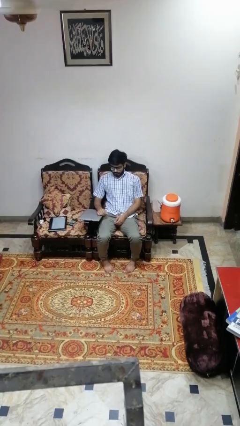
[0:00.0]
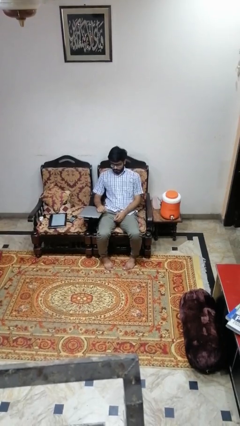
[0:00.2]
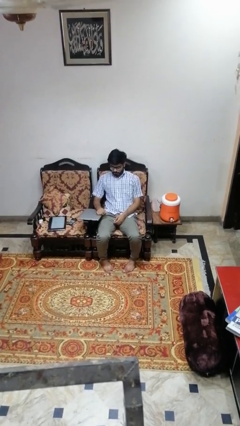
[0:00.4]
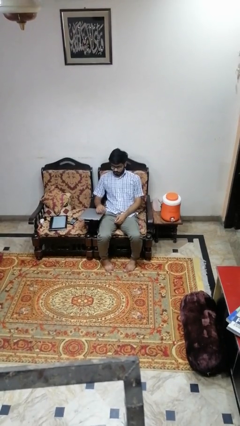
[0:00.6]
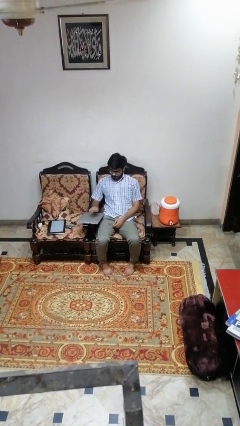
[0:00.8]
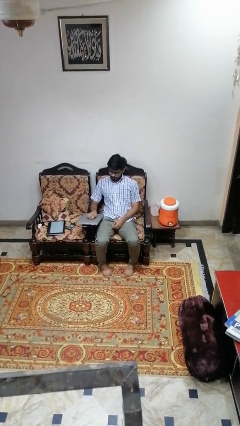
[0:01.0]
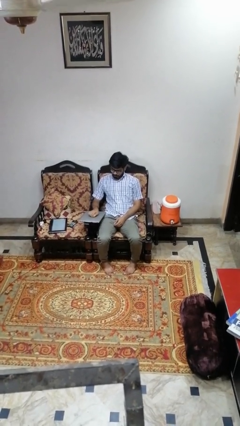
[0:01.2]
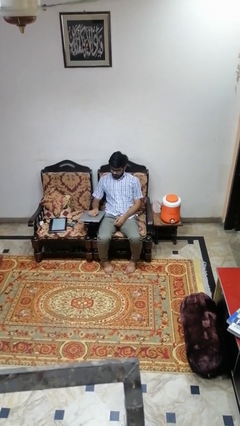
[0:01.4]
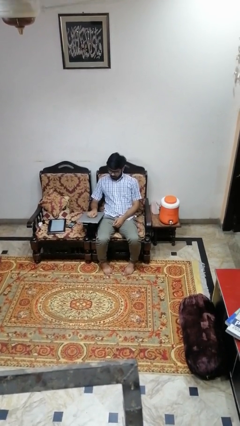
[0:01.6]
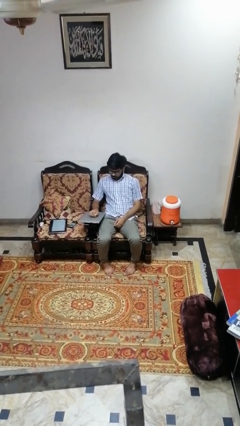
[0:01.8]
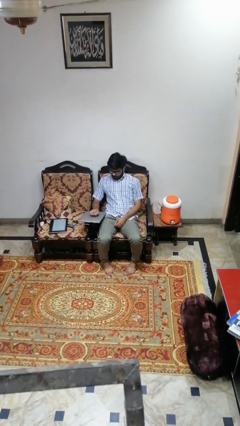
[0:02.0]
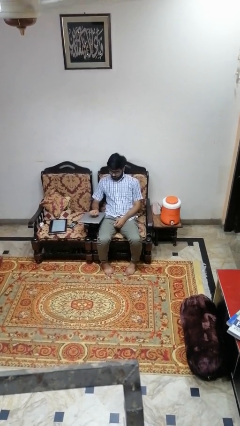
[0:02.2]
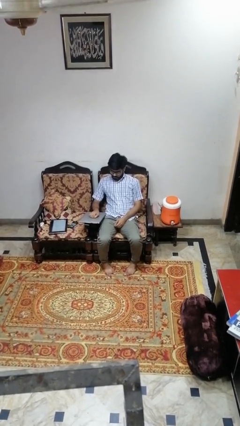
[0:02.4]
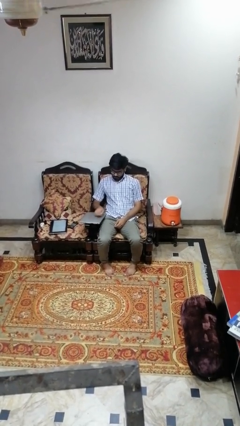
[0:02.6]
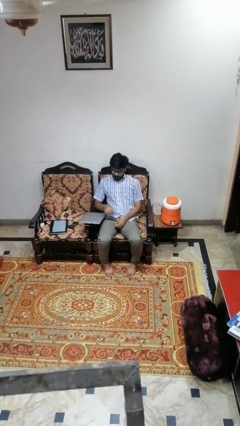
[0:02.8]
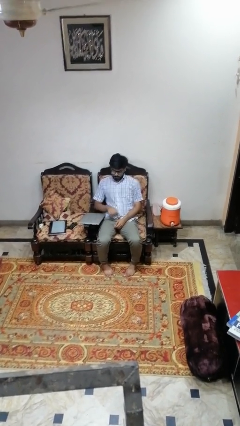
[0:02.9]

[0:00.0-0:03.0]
person taps object with finger

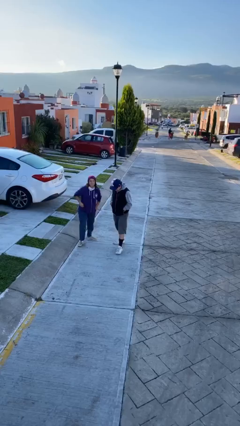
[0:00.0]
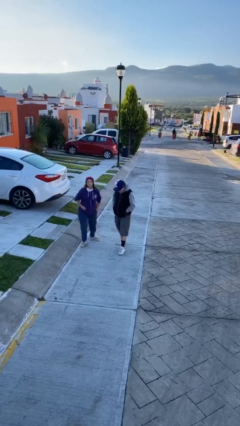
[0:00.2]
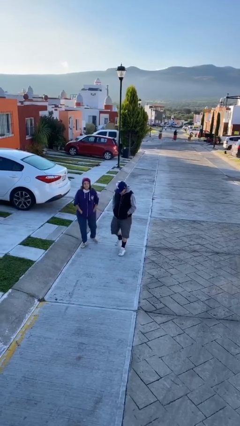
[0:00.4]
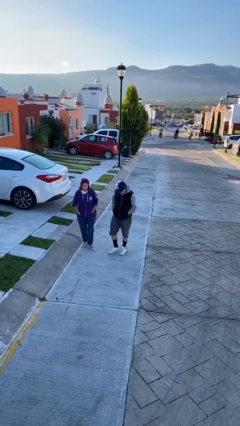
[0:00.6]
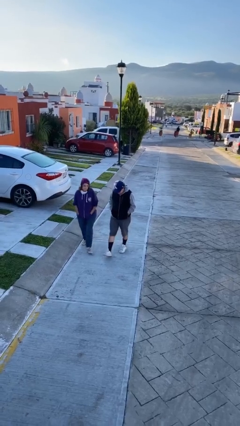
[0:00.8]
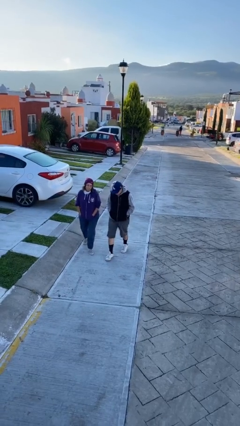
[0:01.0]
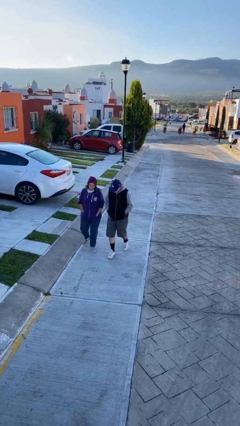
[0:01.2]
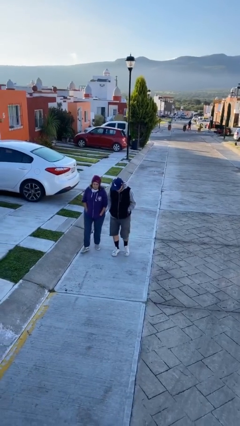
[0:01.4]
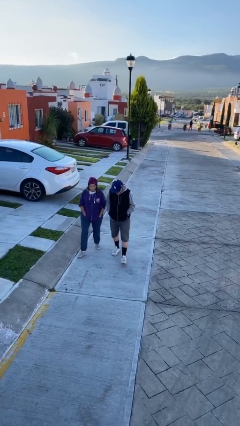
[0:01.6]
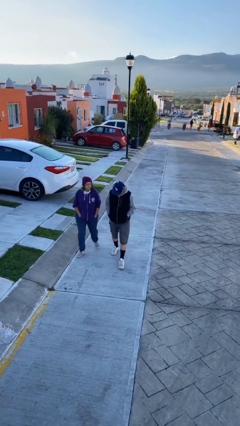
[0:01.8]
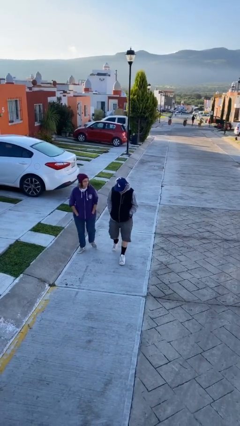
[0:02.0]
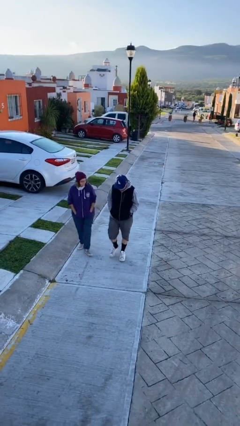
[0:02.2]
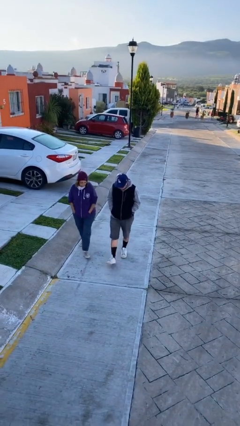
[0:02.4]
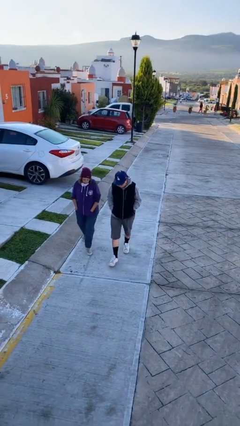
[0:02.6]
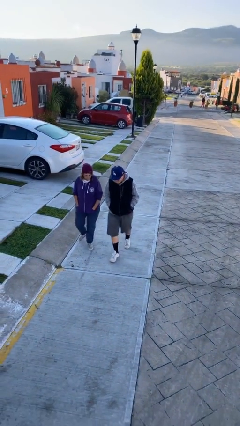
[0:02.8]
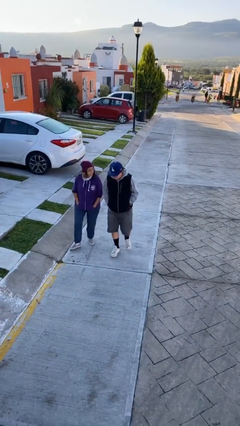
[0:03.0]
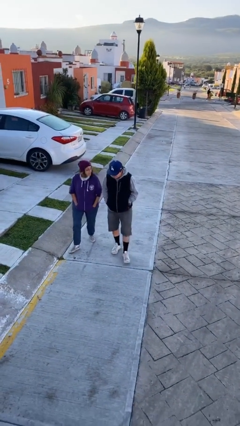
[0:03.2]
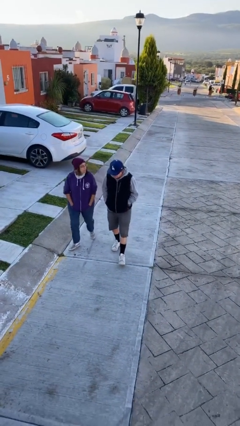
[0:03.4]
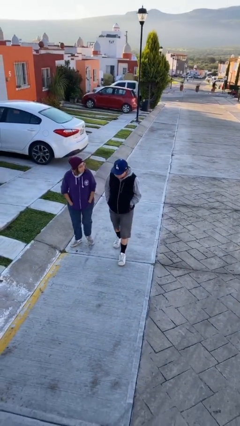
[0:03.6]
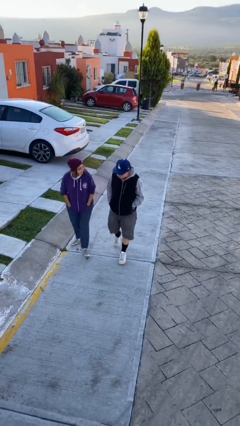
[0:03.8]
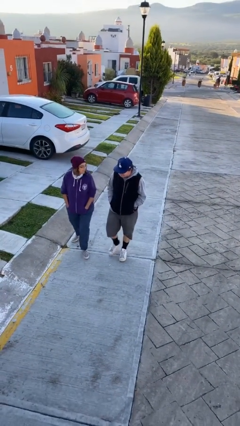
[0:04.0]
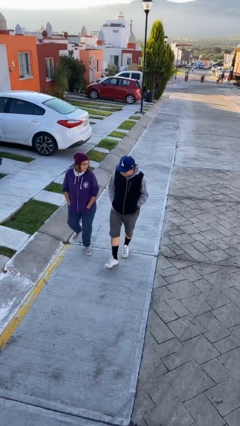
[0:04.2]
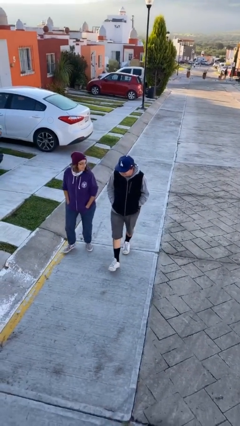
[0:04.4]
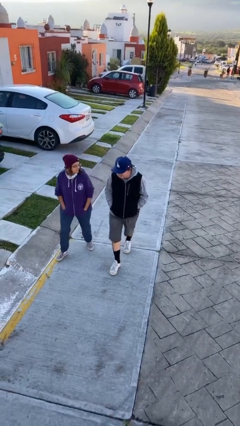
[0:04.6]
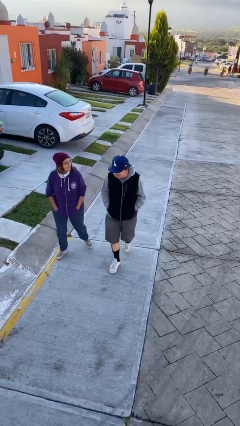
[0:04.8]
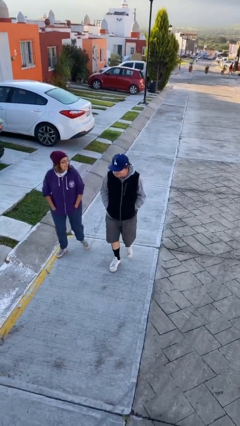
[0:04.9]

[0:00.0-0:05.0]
person talks to person

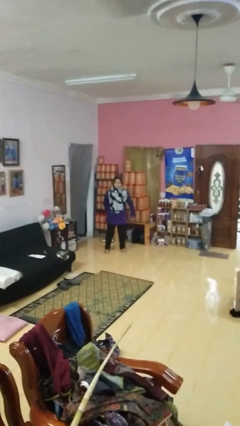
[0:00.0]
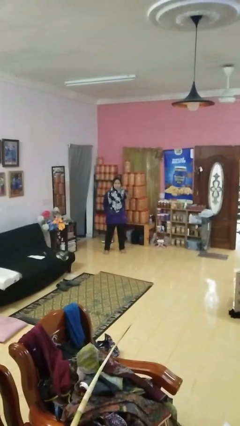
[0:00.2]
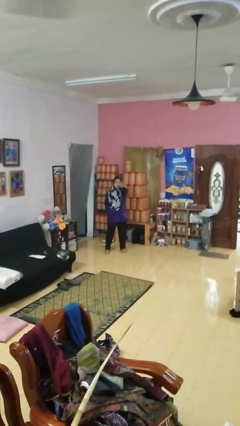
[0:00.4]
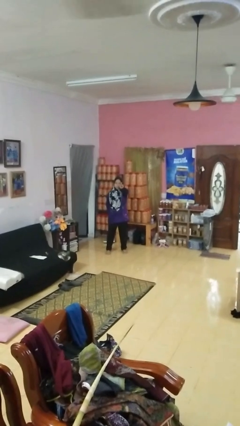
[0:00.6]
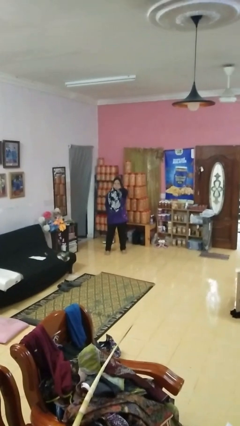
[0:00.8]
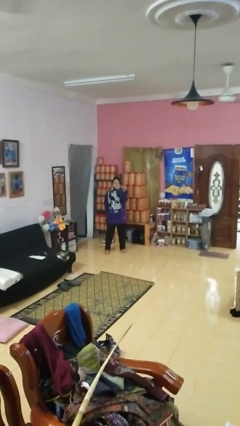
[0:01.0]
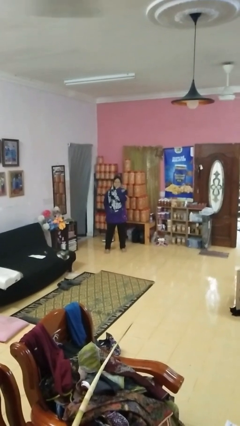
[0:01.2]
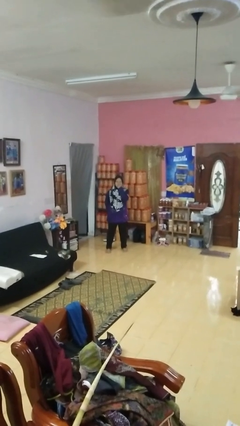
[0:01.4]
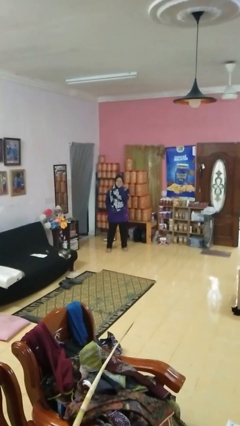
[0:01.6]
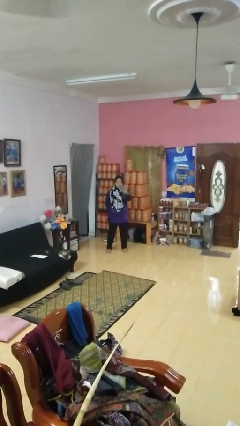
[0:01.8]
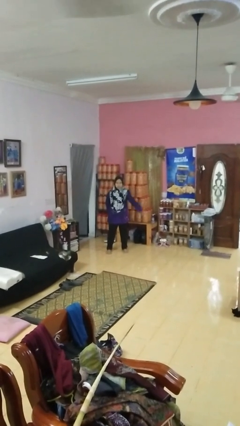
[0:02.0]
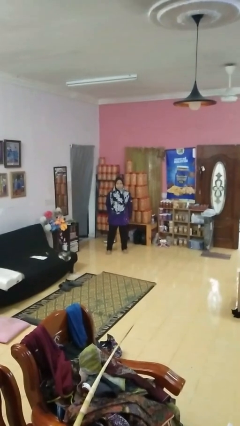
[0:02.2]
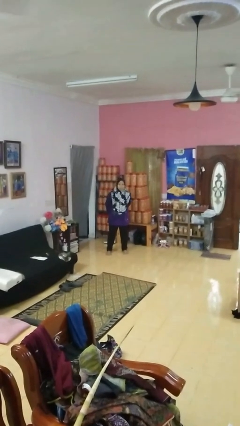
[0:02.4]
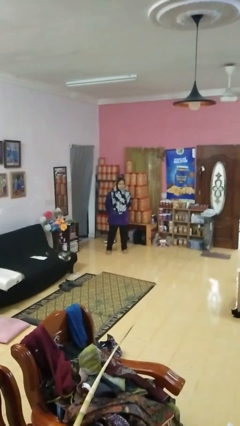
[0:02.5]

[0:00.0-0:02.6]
person gestures watch closely

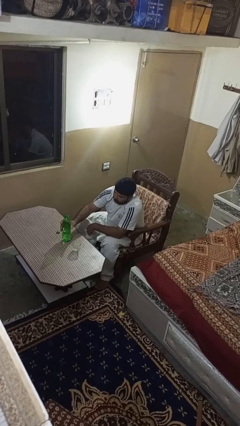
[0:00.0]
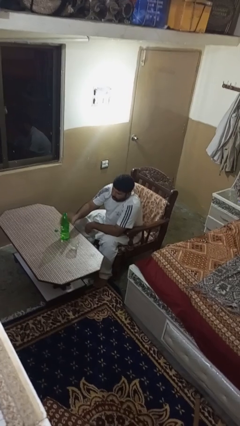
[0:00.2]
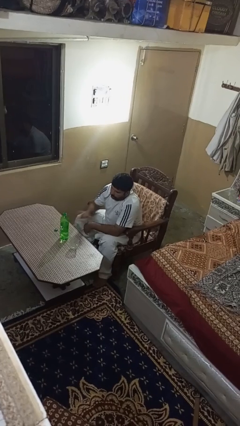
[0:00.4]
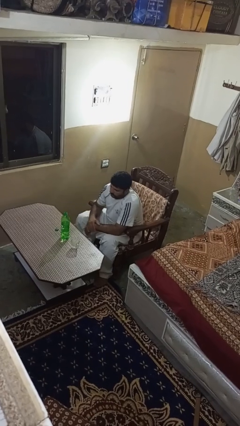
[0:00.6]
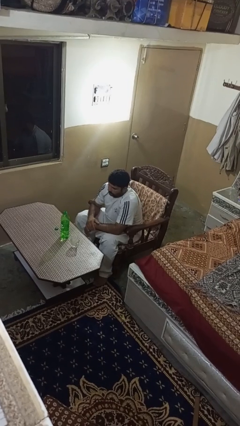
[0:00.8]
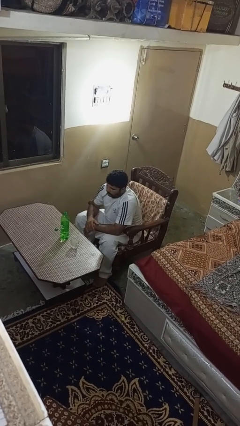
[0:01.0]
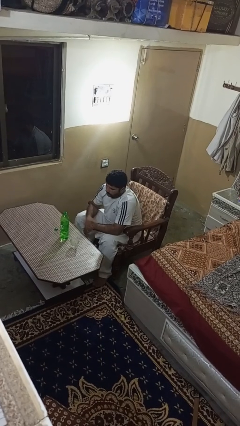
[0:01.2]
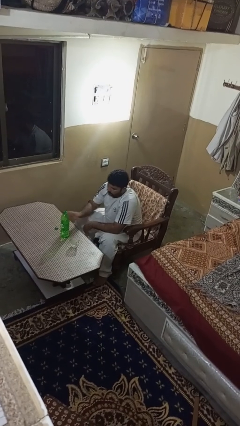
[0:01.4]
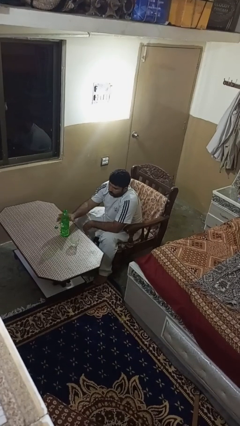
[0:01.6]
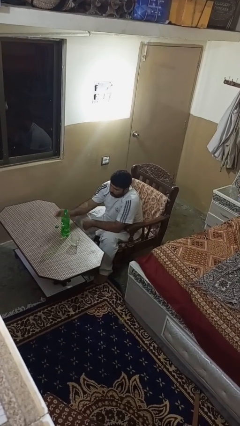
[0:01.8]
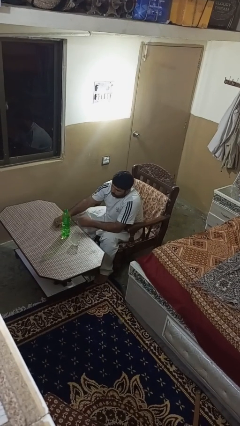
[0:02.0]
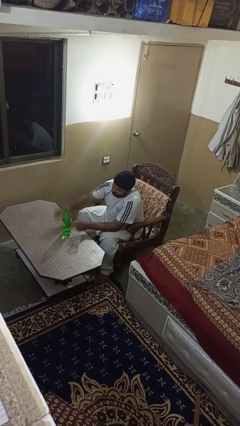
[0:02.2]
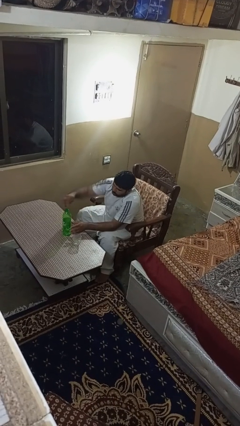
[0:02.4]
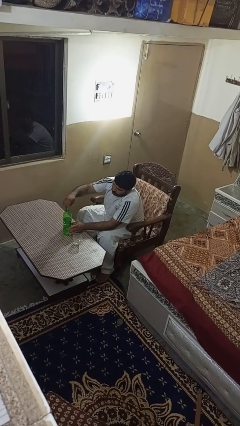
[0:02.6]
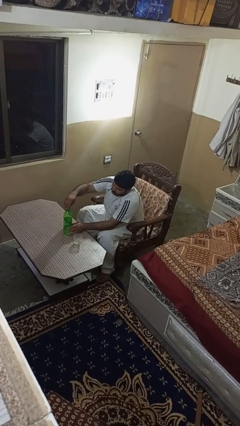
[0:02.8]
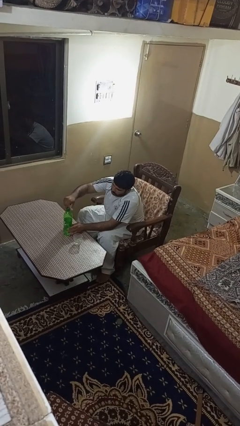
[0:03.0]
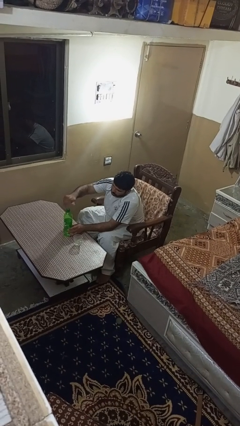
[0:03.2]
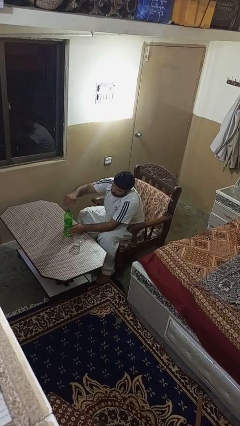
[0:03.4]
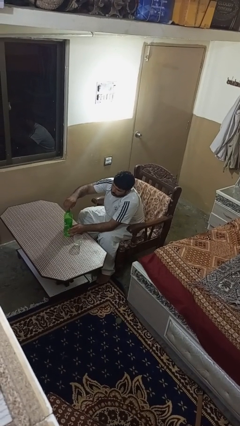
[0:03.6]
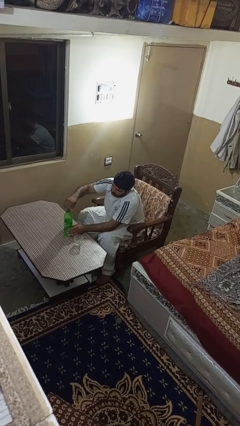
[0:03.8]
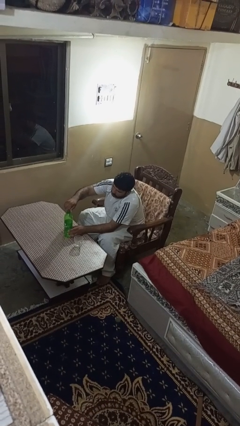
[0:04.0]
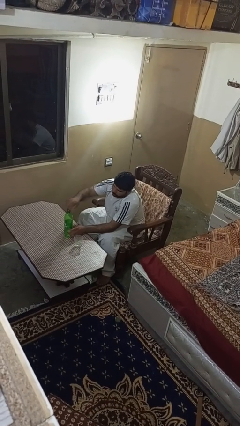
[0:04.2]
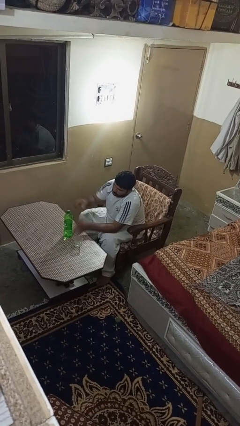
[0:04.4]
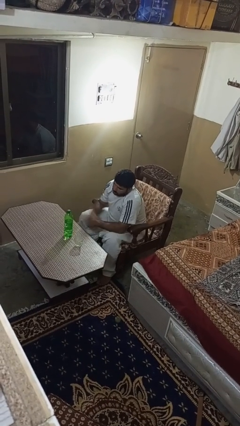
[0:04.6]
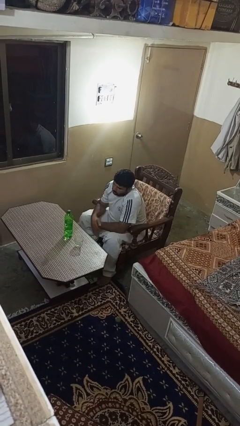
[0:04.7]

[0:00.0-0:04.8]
person screws lid to bottle

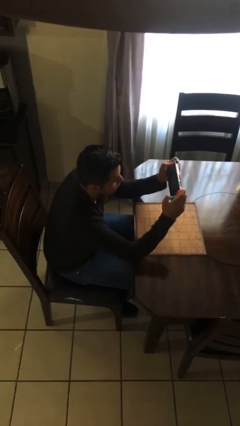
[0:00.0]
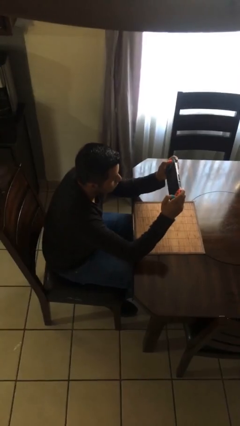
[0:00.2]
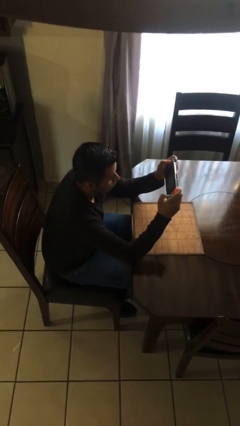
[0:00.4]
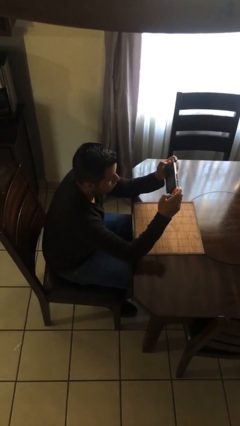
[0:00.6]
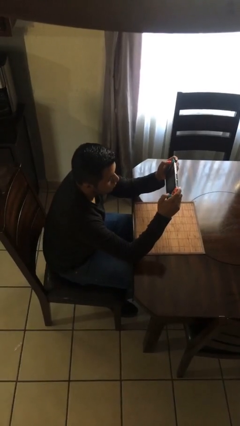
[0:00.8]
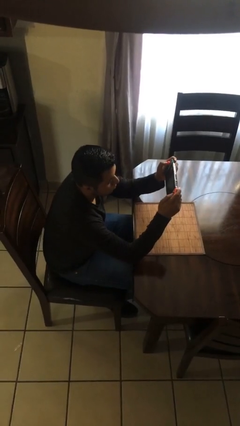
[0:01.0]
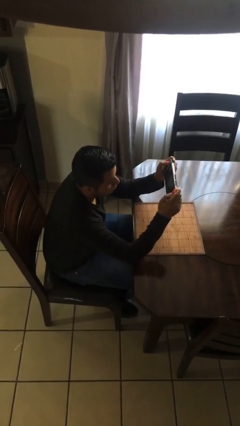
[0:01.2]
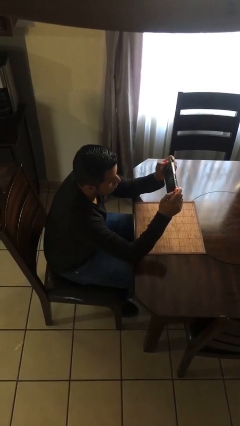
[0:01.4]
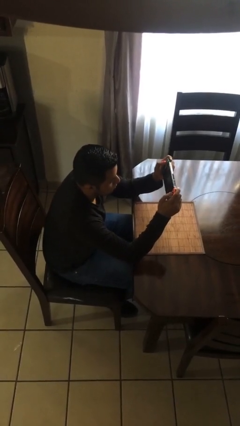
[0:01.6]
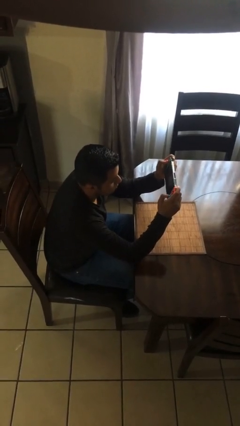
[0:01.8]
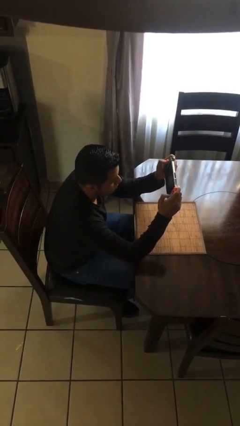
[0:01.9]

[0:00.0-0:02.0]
person interacts with handheld game
